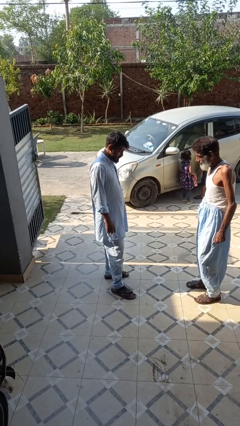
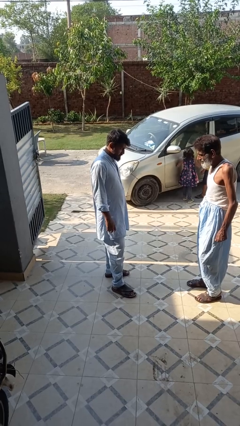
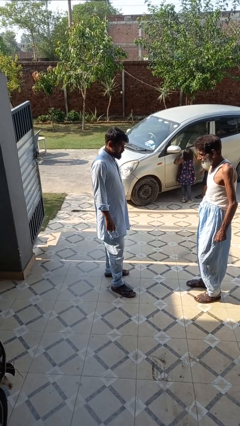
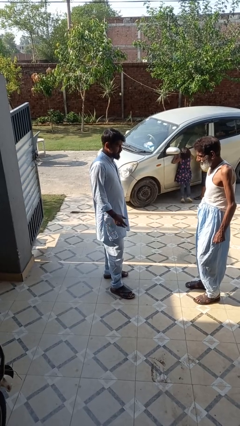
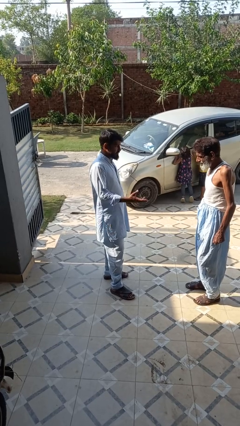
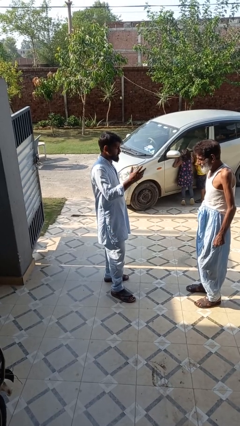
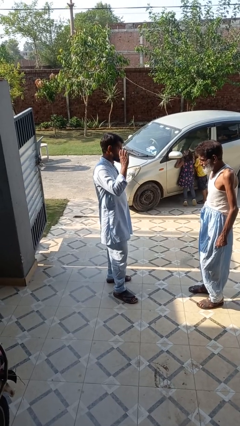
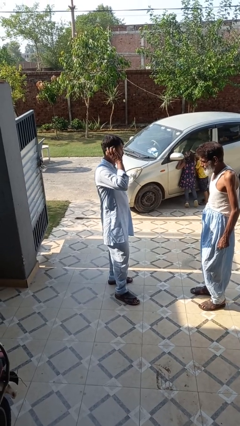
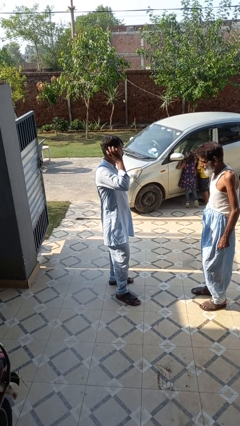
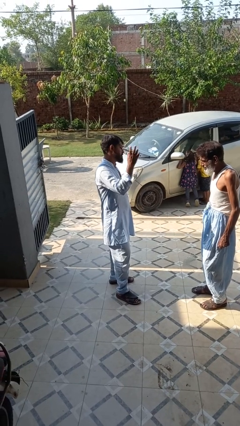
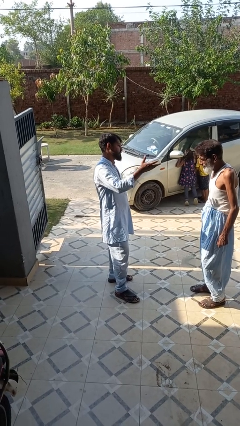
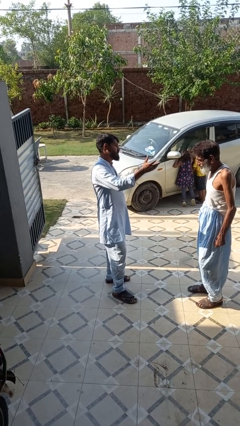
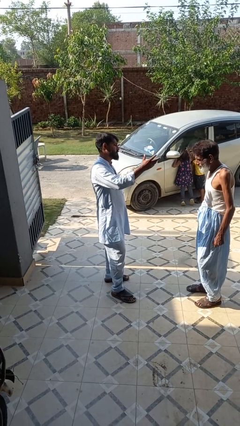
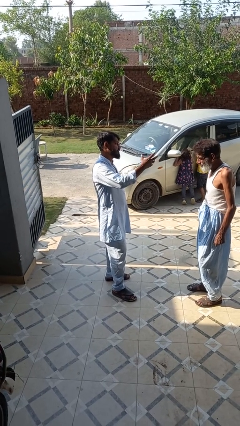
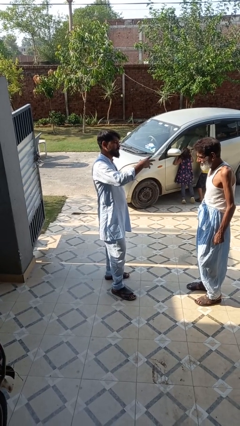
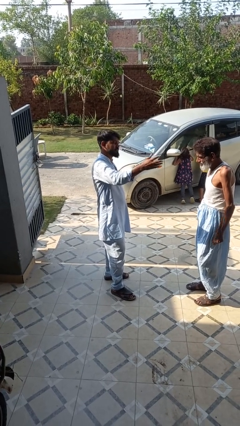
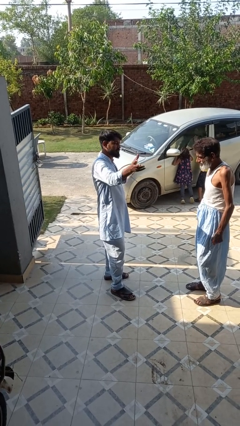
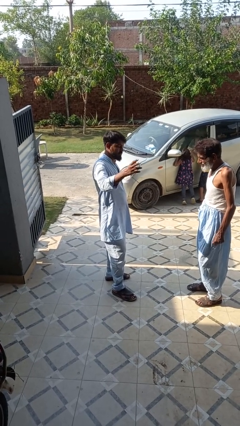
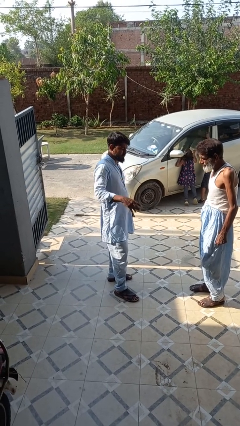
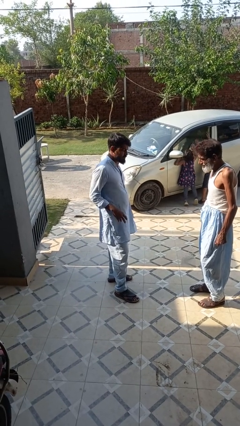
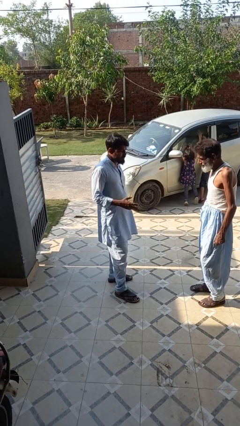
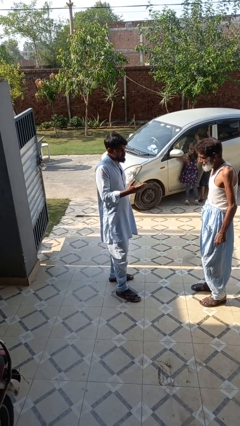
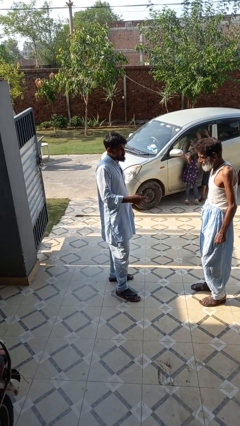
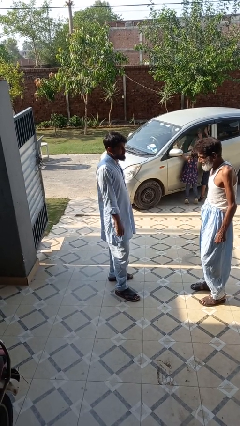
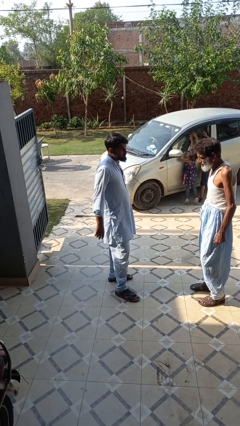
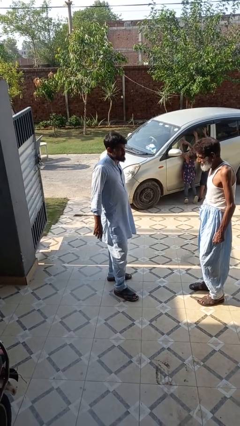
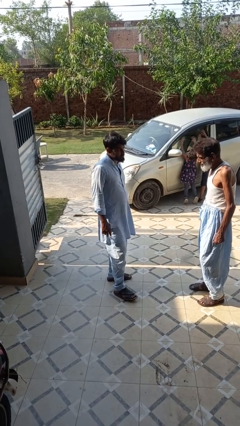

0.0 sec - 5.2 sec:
person talks to person

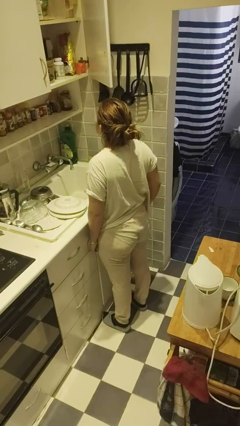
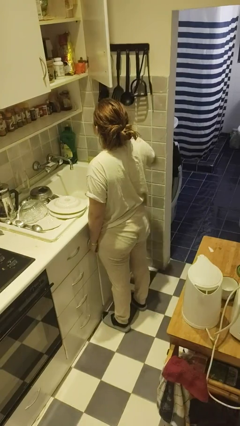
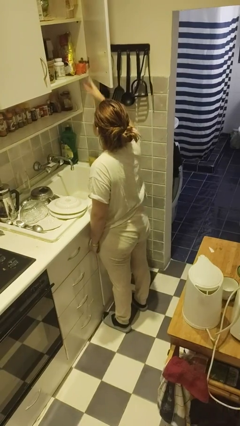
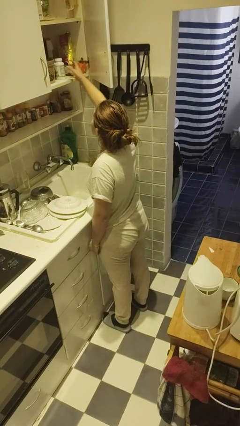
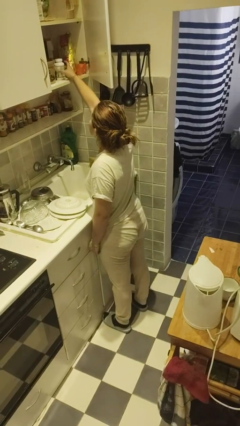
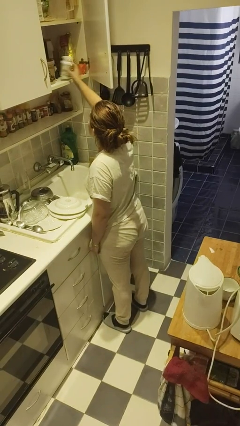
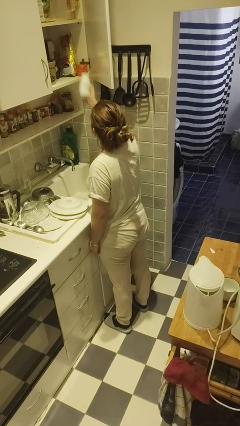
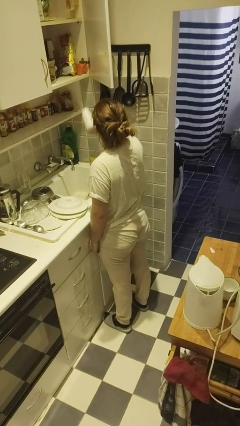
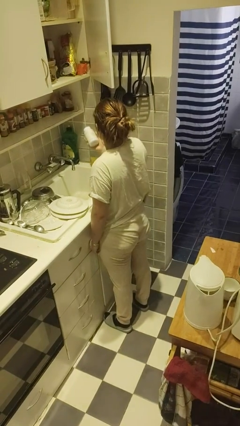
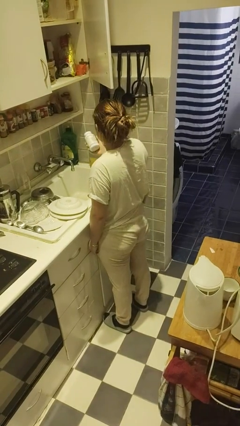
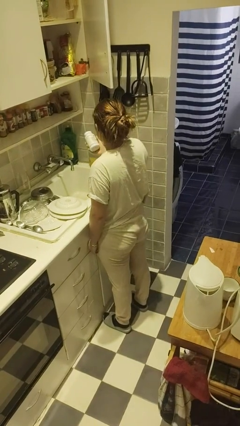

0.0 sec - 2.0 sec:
person picks up object from cabinet

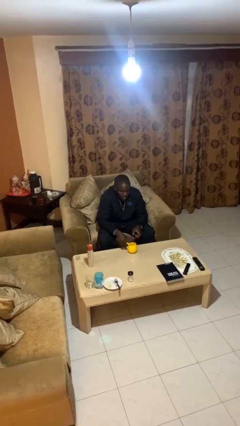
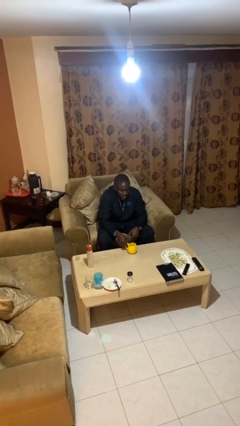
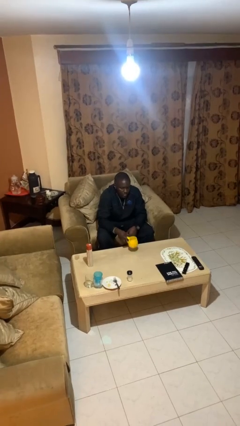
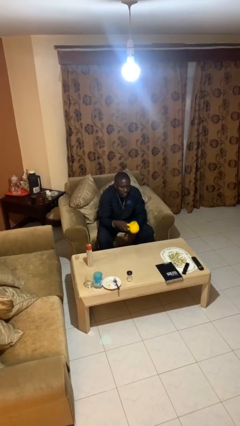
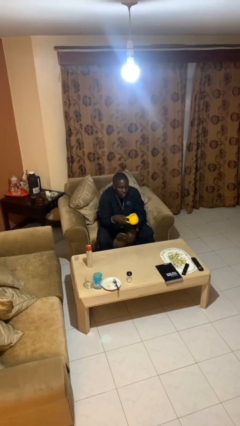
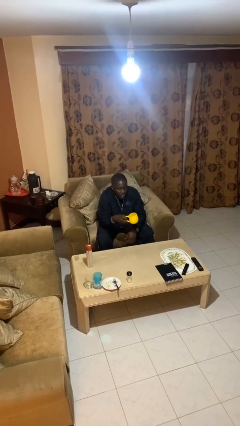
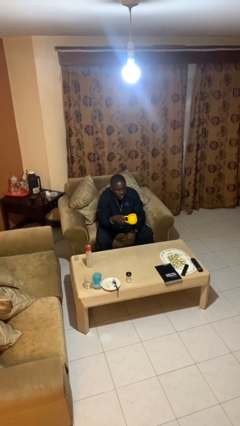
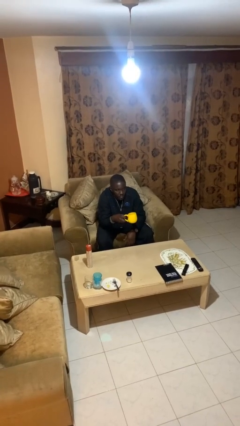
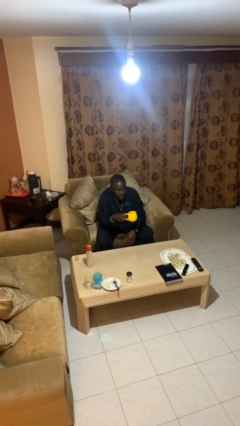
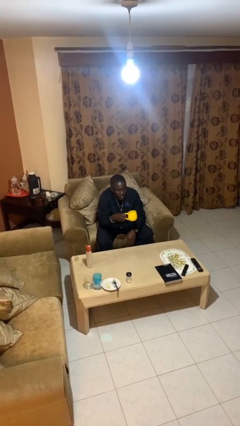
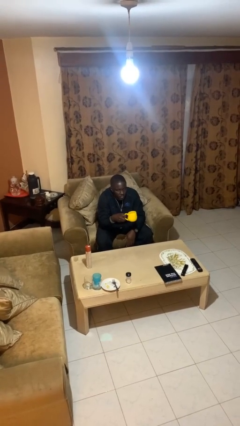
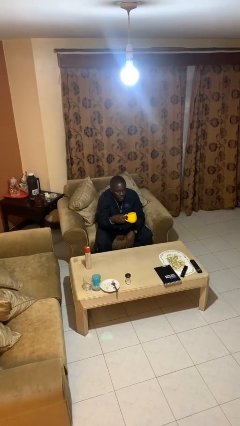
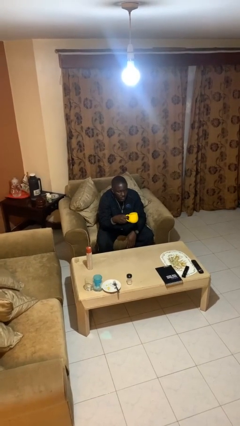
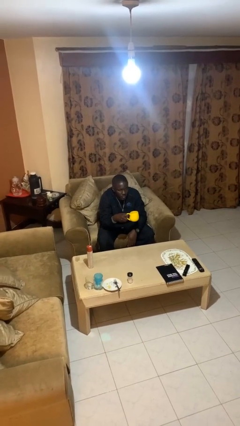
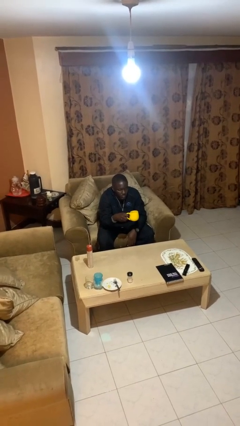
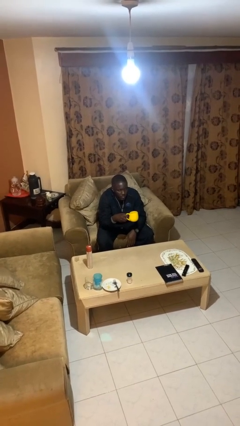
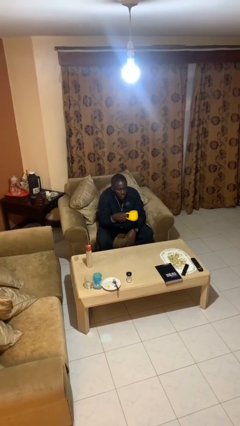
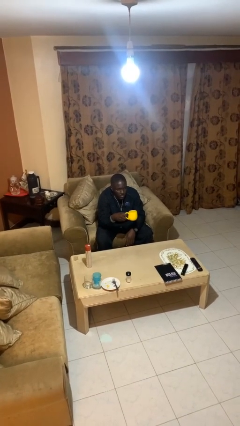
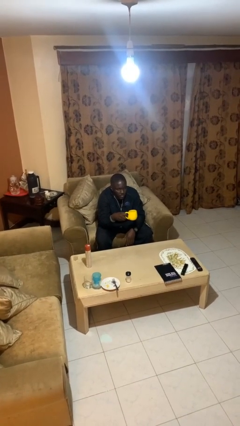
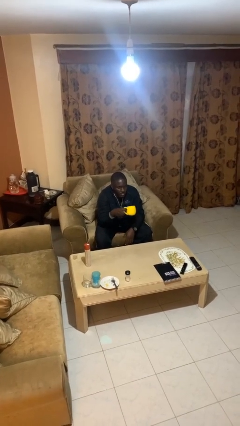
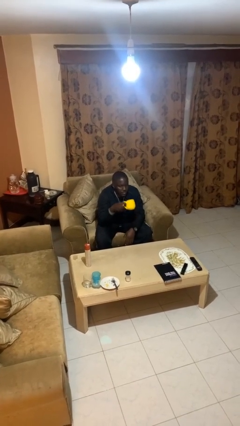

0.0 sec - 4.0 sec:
person picks up object from table

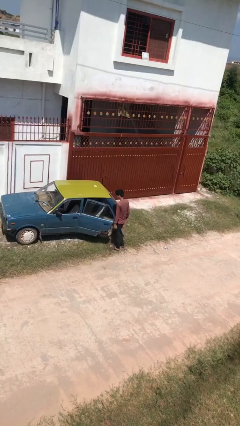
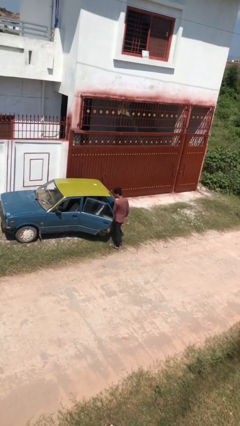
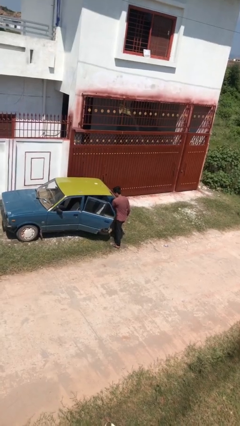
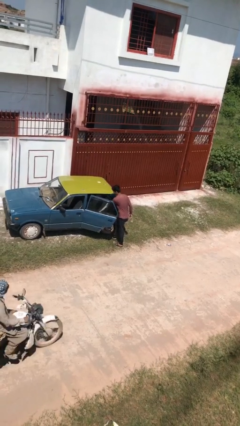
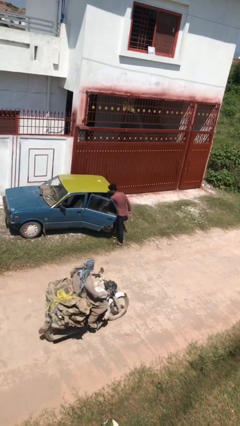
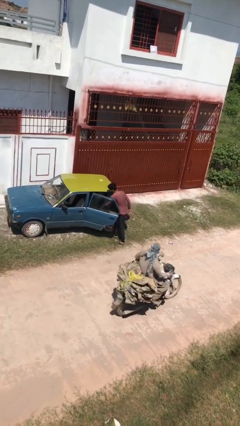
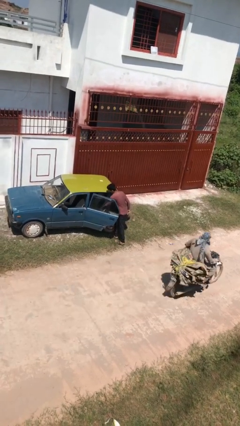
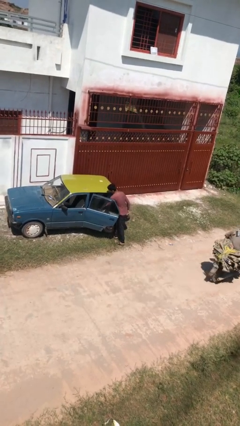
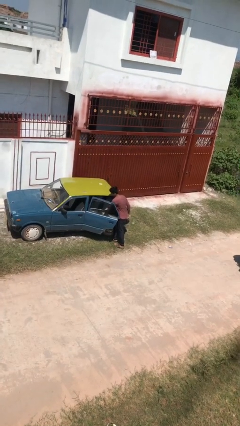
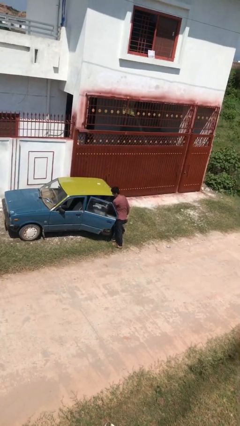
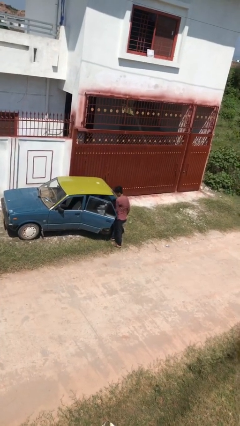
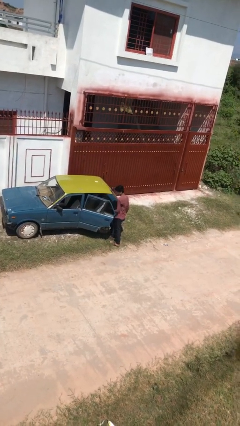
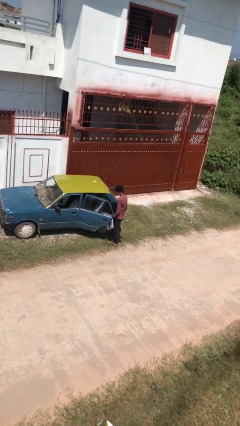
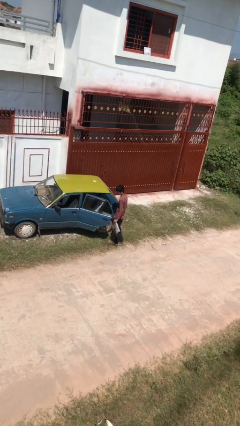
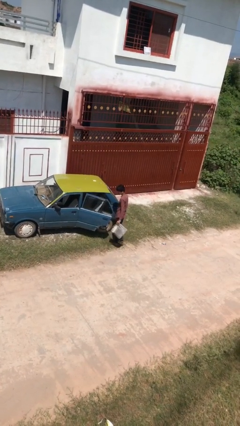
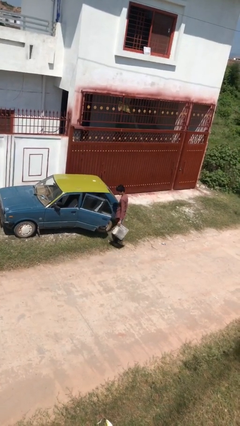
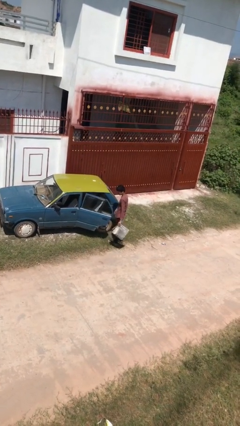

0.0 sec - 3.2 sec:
person unloads car

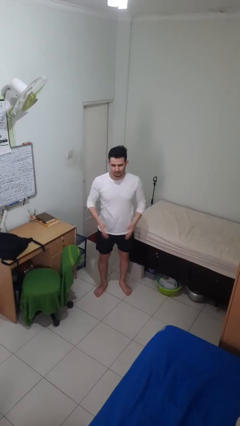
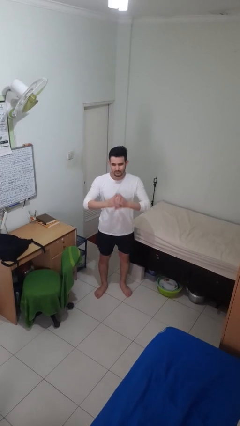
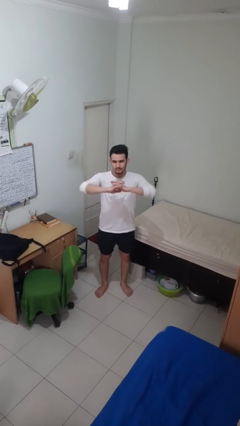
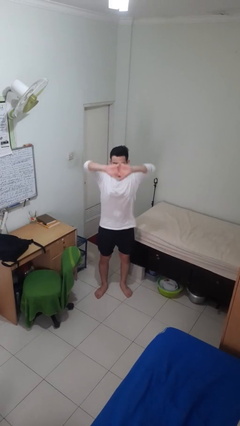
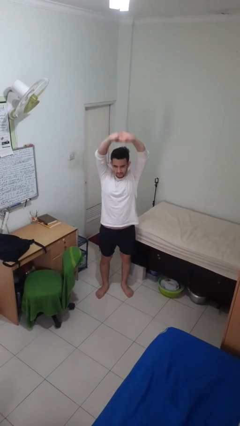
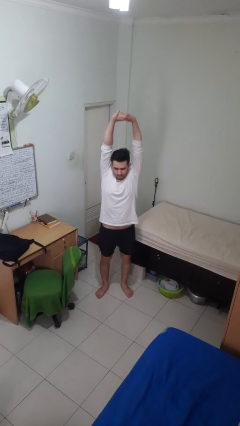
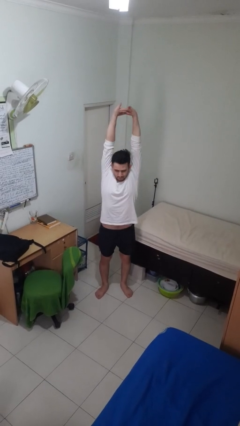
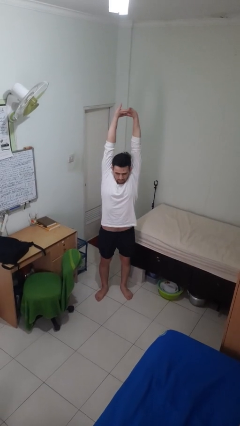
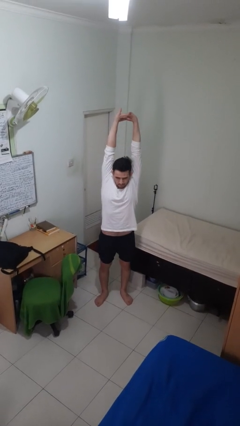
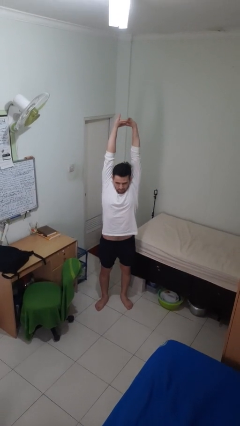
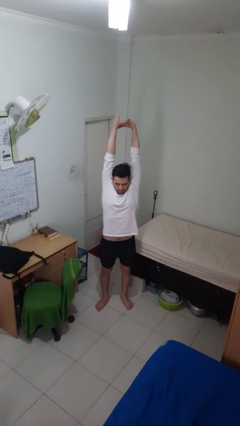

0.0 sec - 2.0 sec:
person stretches arms over head

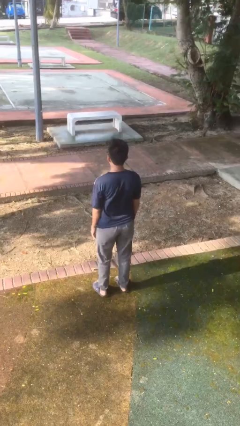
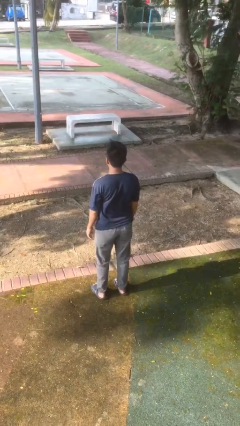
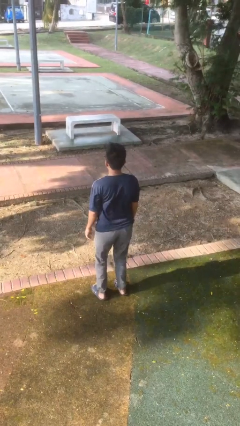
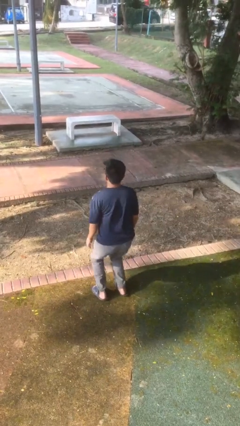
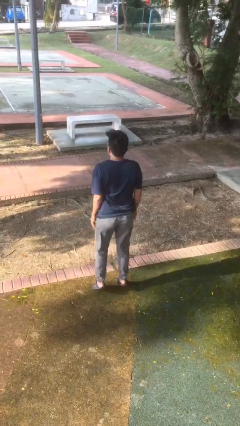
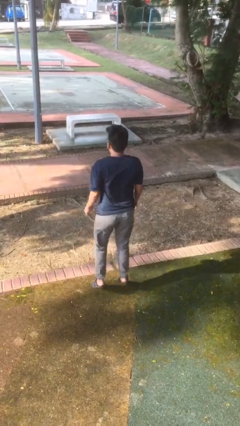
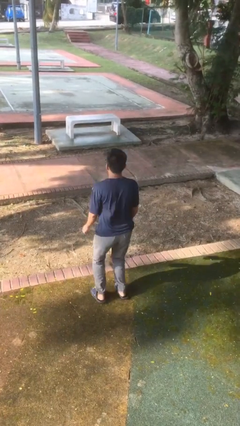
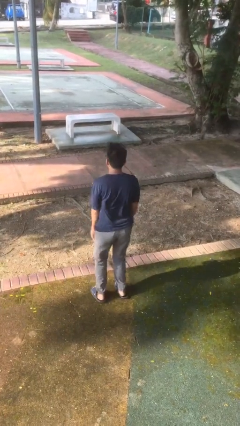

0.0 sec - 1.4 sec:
person jumps
